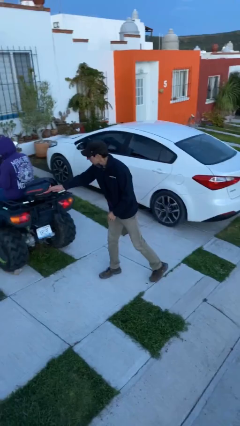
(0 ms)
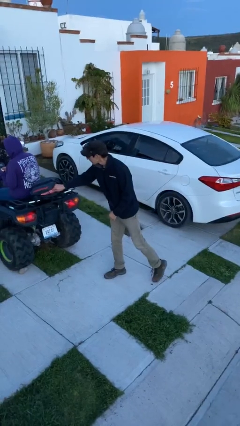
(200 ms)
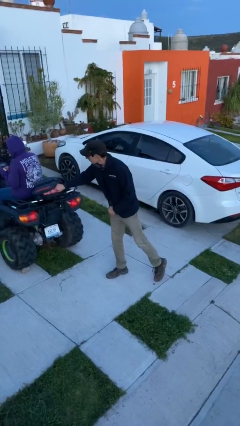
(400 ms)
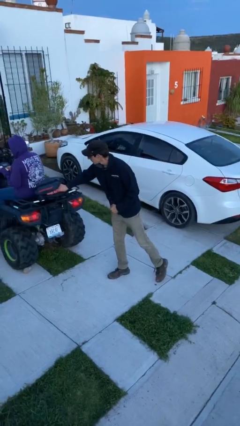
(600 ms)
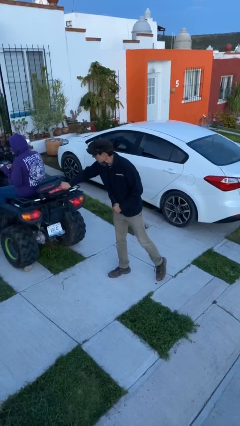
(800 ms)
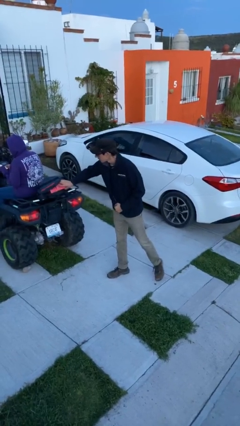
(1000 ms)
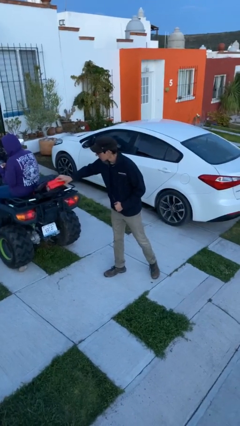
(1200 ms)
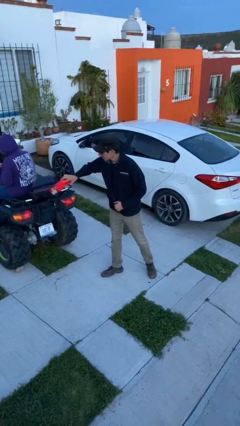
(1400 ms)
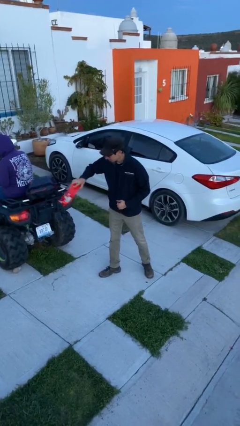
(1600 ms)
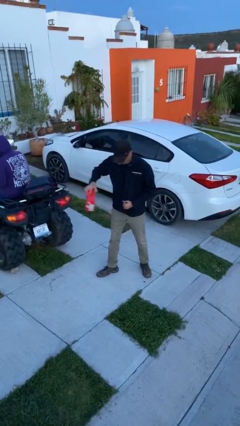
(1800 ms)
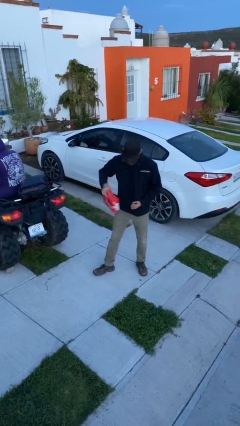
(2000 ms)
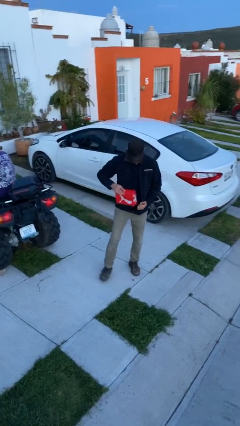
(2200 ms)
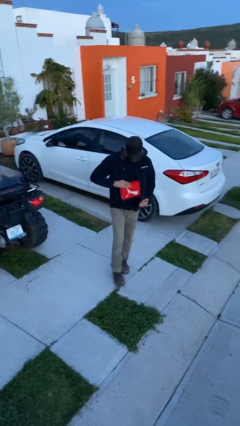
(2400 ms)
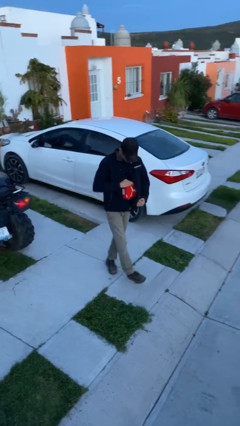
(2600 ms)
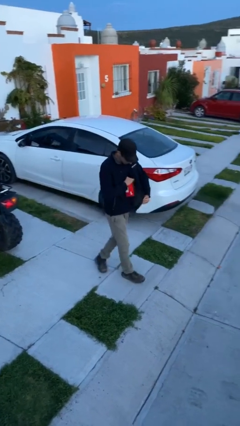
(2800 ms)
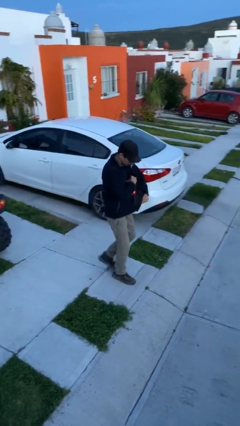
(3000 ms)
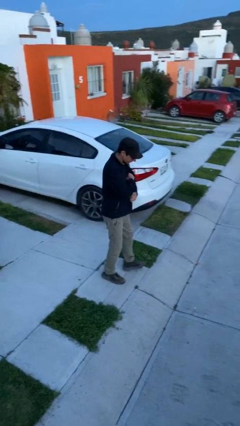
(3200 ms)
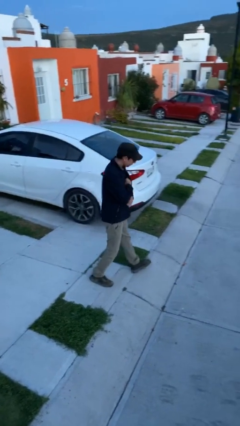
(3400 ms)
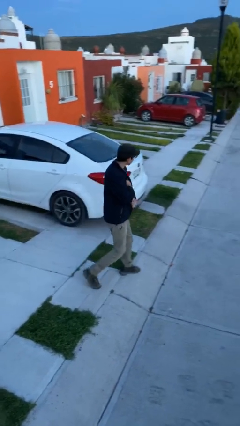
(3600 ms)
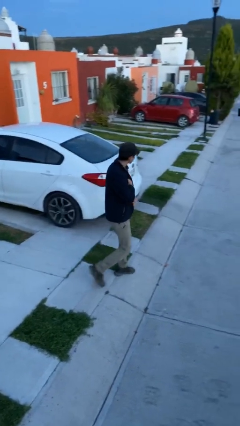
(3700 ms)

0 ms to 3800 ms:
person steals object from person

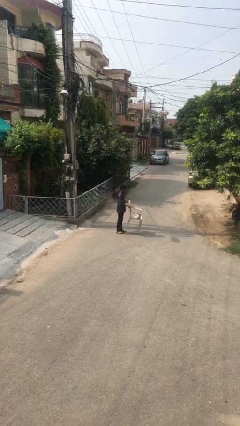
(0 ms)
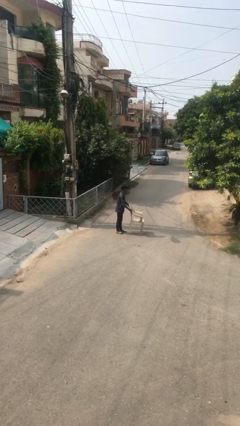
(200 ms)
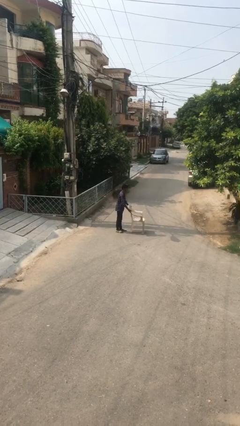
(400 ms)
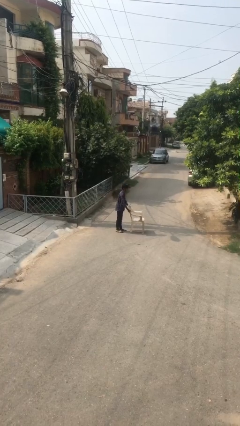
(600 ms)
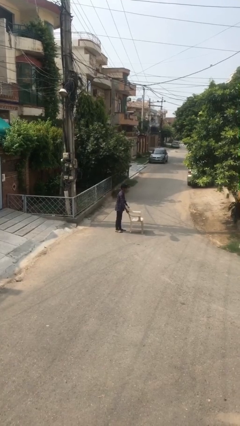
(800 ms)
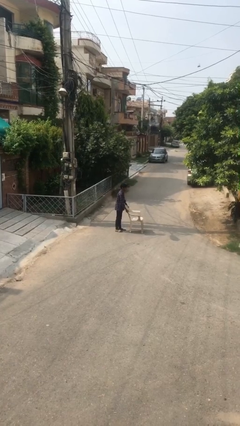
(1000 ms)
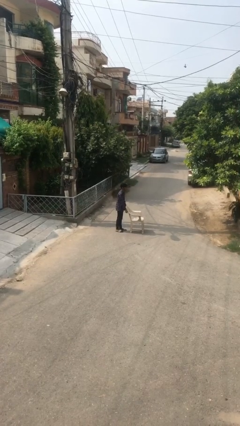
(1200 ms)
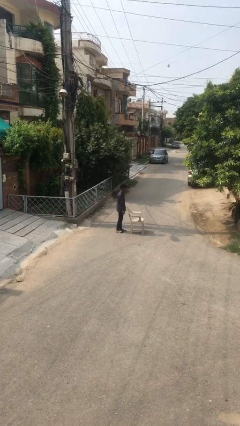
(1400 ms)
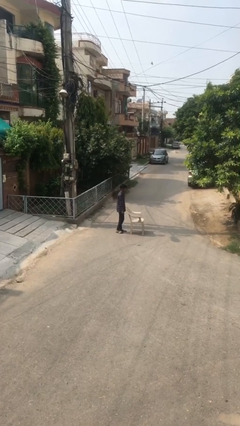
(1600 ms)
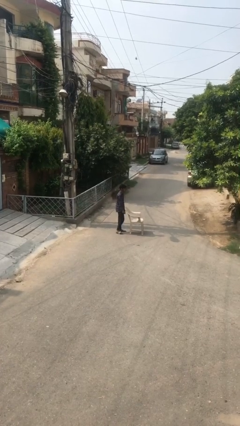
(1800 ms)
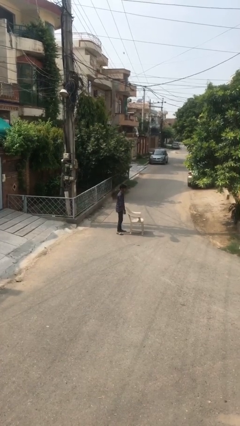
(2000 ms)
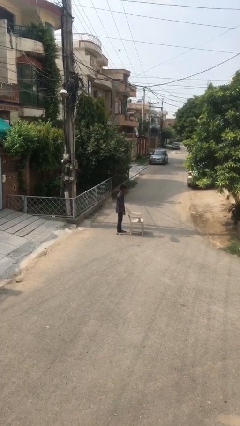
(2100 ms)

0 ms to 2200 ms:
person puts down object on floor

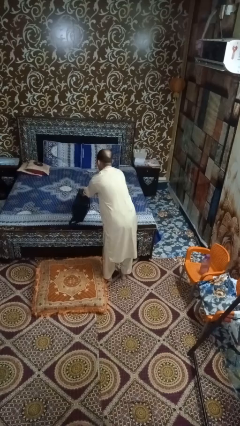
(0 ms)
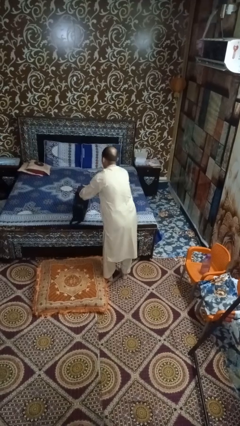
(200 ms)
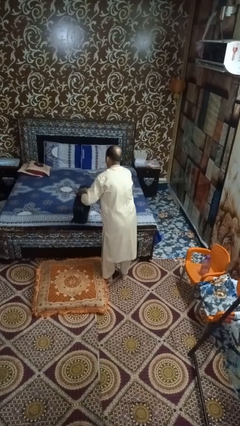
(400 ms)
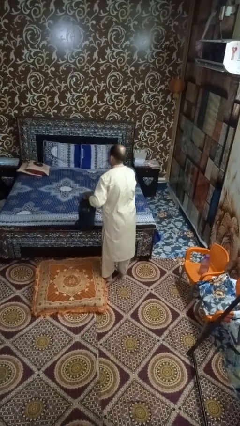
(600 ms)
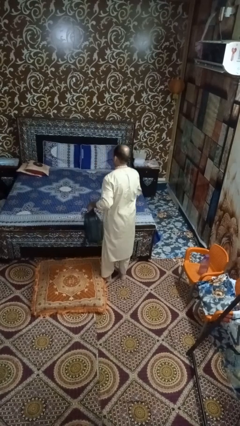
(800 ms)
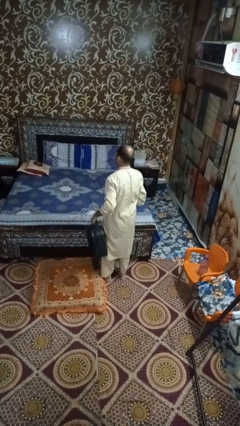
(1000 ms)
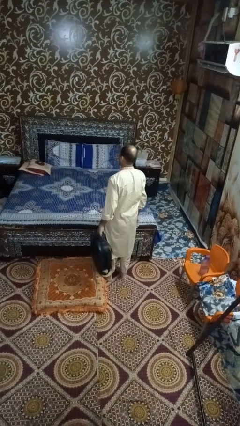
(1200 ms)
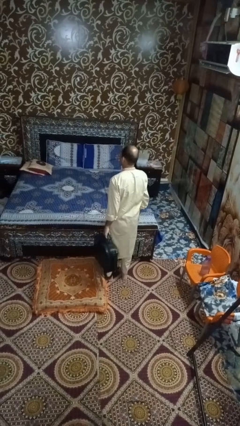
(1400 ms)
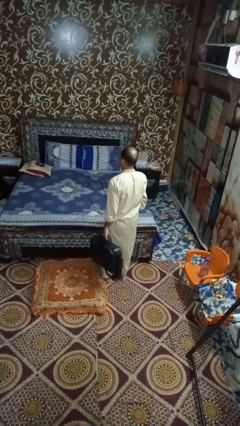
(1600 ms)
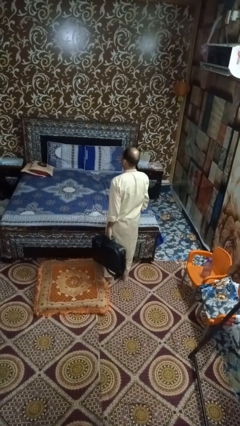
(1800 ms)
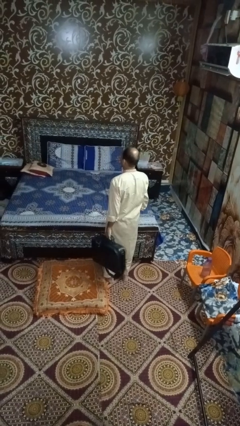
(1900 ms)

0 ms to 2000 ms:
person puts down object on bed

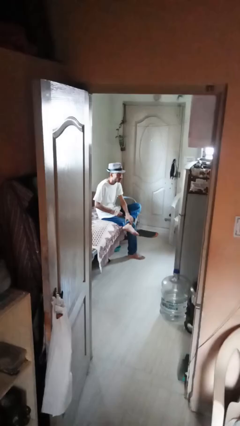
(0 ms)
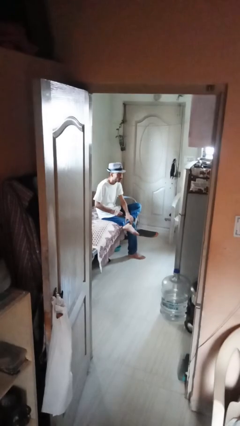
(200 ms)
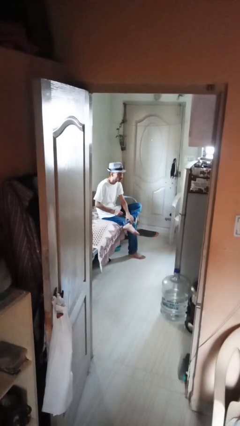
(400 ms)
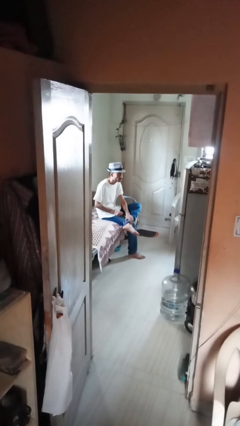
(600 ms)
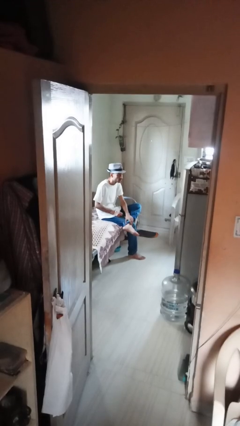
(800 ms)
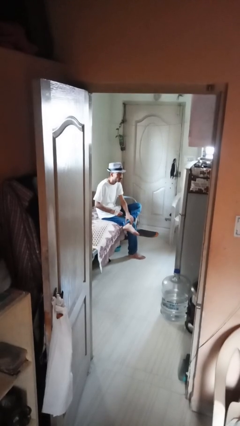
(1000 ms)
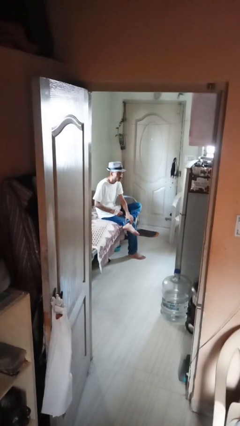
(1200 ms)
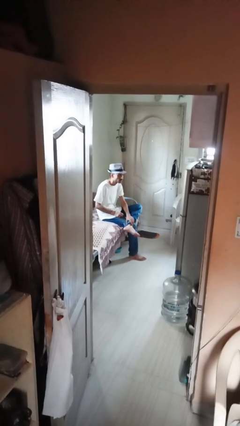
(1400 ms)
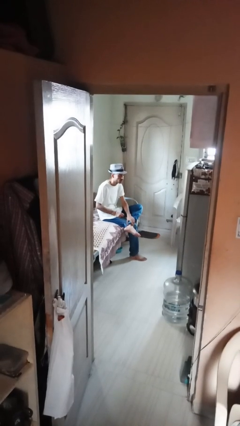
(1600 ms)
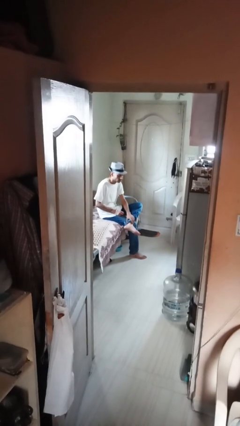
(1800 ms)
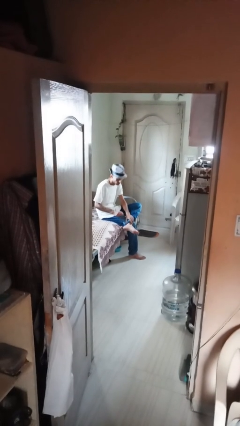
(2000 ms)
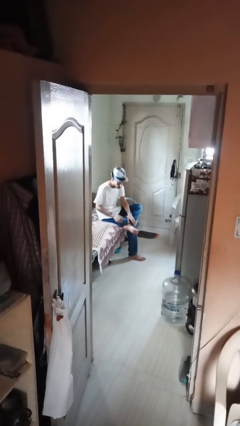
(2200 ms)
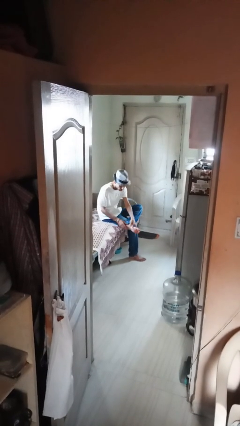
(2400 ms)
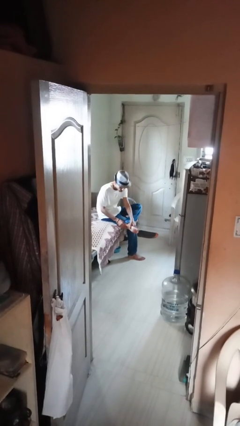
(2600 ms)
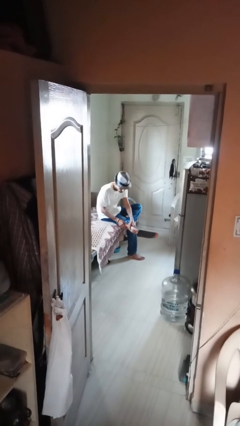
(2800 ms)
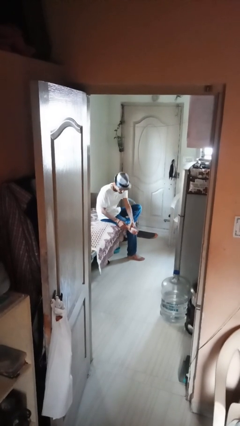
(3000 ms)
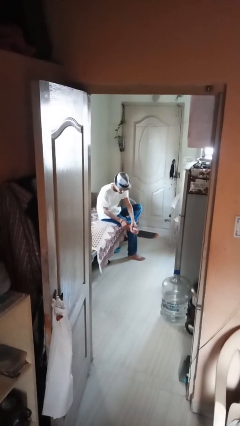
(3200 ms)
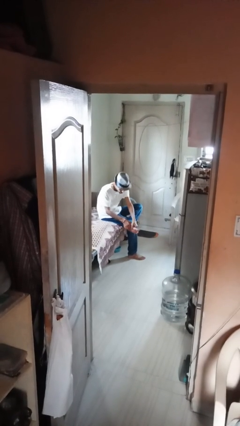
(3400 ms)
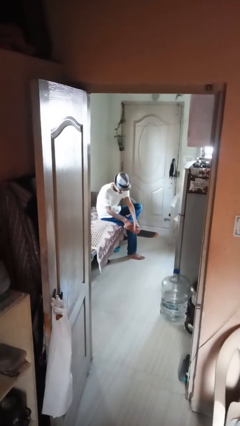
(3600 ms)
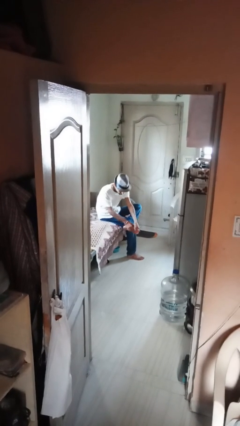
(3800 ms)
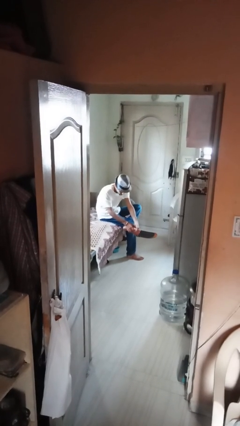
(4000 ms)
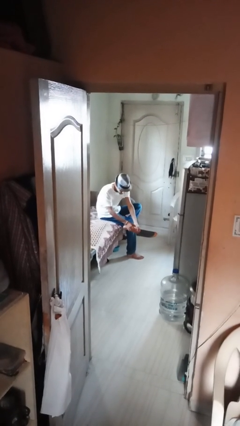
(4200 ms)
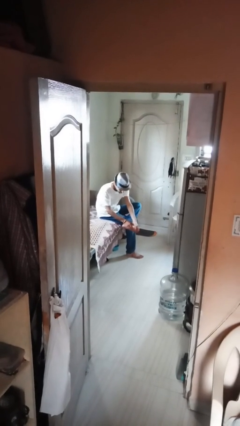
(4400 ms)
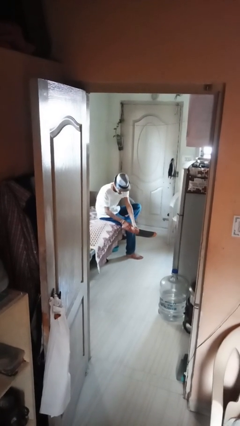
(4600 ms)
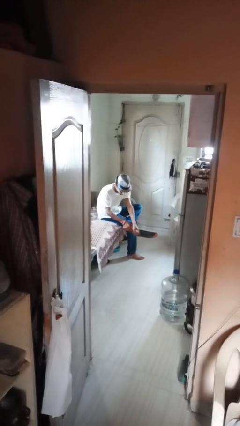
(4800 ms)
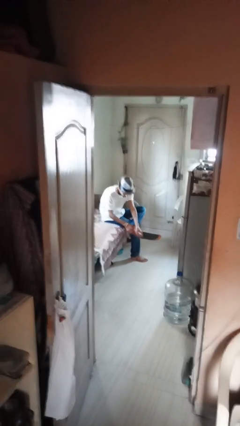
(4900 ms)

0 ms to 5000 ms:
person rubs foot

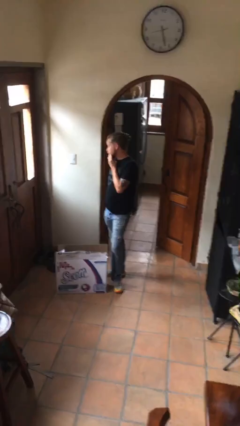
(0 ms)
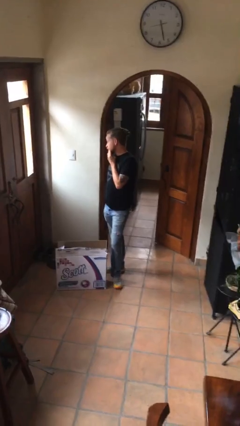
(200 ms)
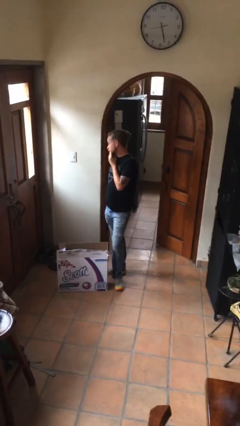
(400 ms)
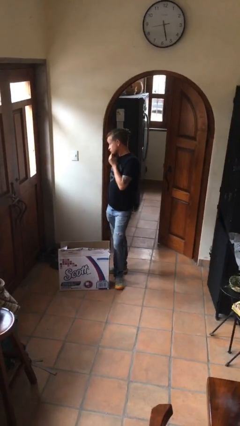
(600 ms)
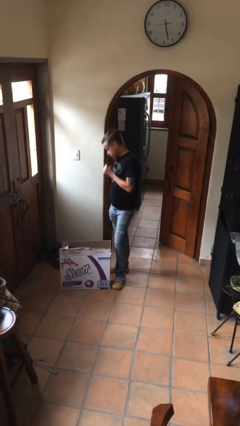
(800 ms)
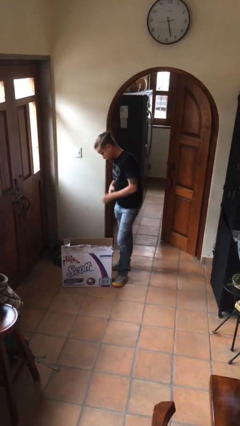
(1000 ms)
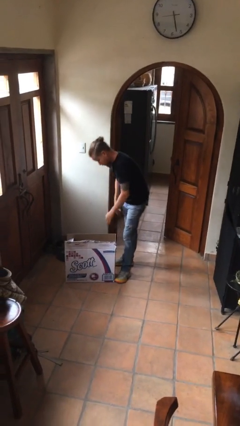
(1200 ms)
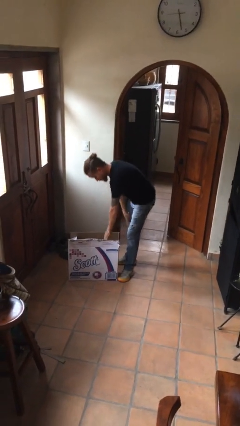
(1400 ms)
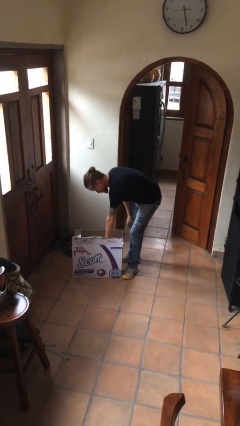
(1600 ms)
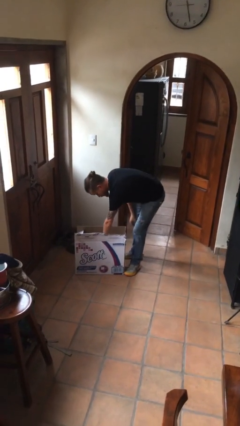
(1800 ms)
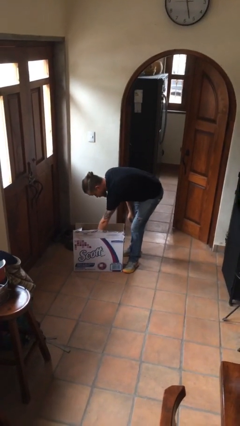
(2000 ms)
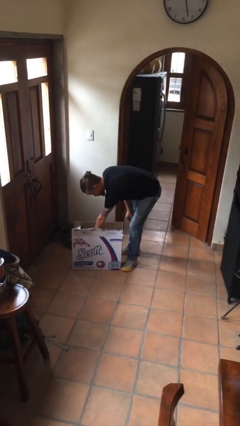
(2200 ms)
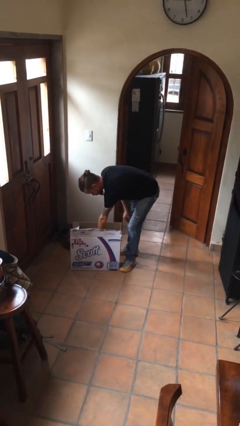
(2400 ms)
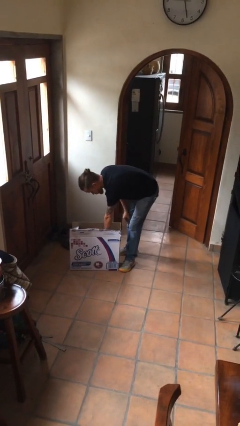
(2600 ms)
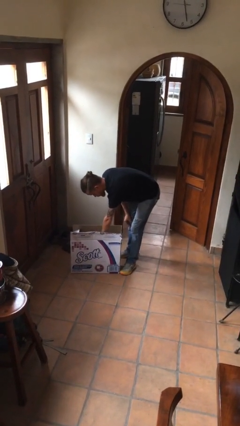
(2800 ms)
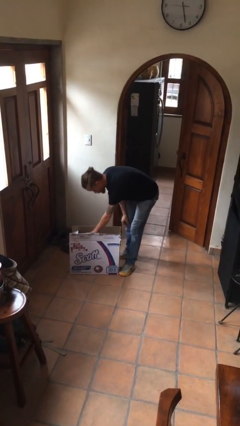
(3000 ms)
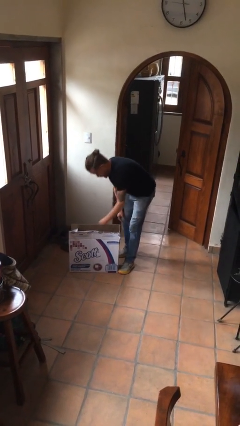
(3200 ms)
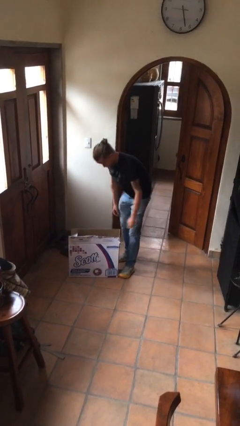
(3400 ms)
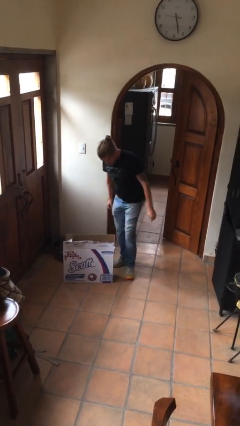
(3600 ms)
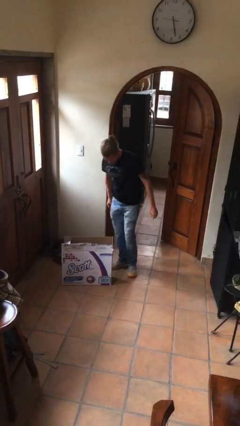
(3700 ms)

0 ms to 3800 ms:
person searches in box

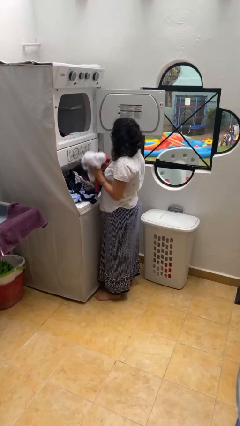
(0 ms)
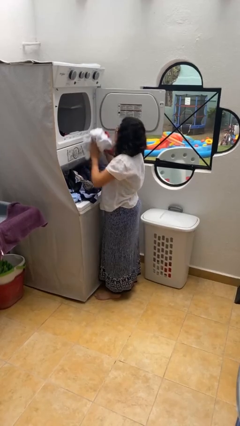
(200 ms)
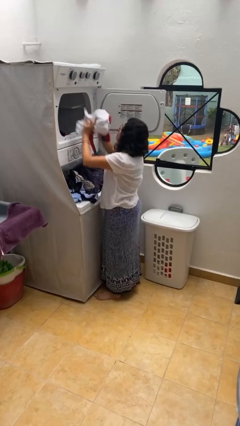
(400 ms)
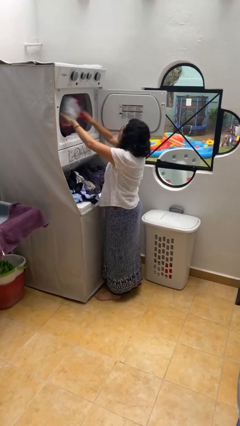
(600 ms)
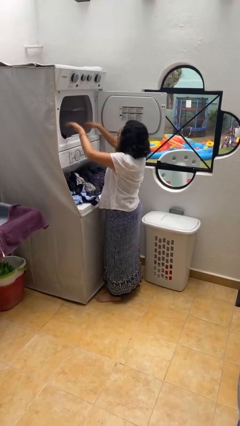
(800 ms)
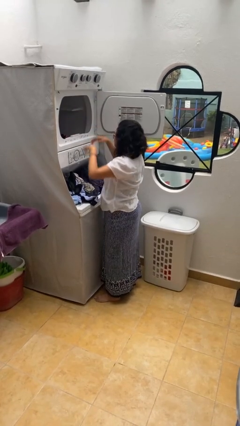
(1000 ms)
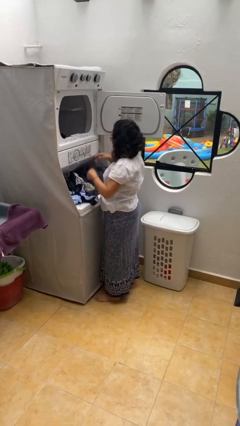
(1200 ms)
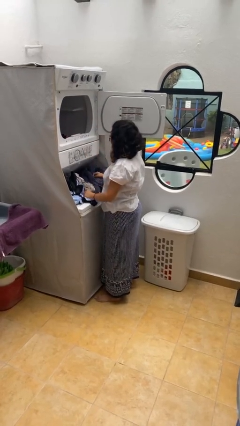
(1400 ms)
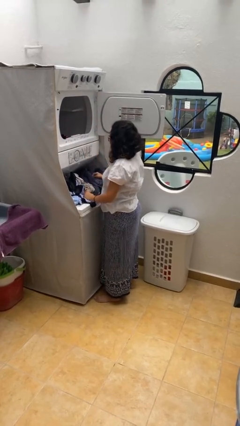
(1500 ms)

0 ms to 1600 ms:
person loads dryer
